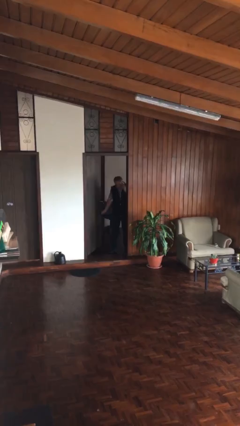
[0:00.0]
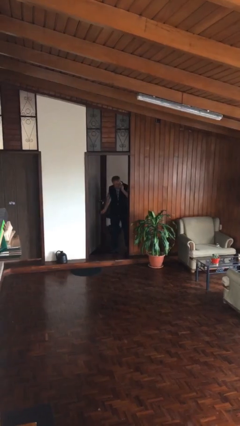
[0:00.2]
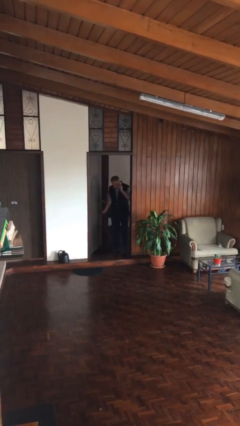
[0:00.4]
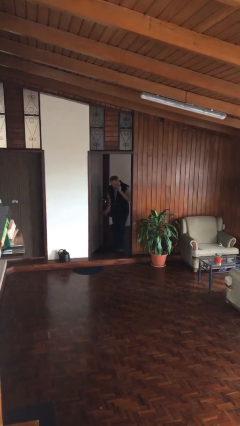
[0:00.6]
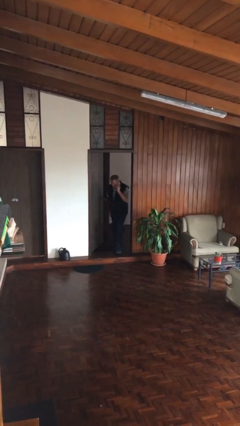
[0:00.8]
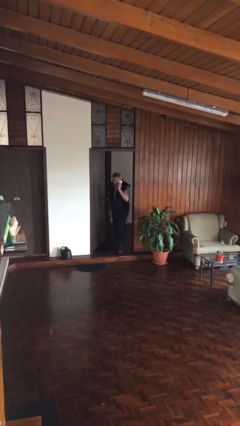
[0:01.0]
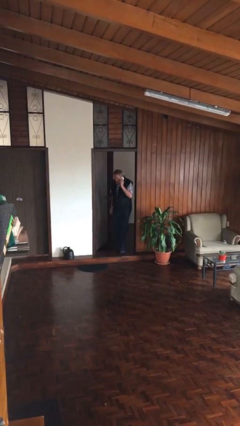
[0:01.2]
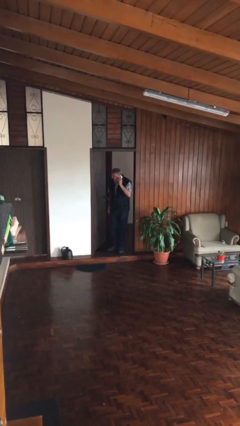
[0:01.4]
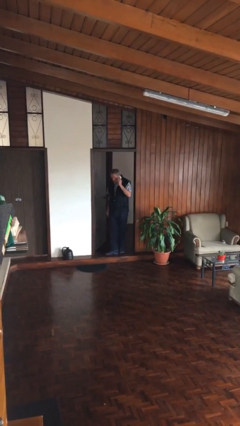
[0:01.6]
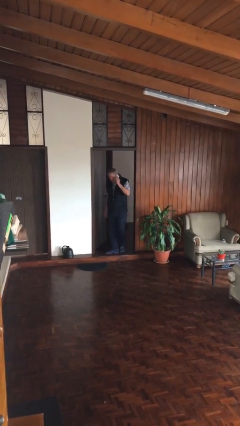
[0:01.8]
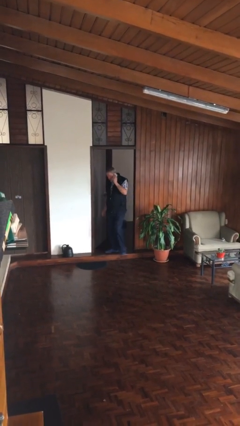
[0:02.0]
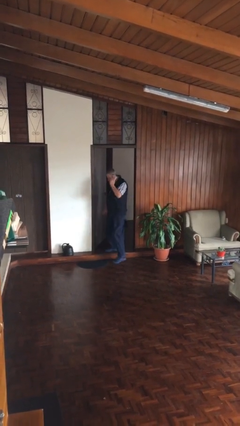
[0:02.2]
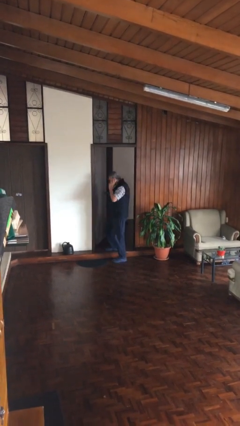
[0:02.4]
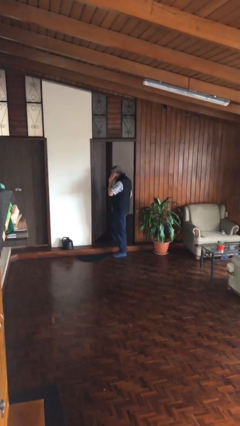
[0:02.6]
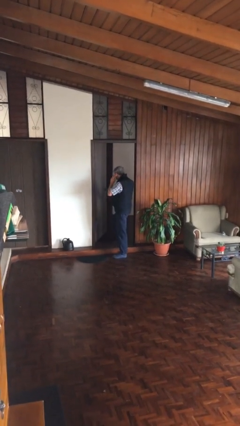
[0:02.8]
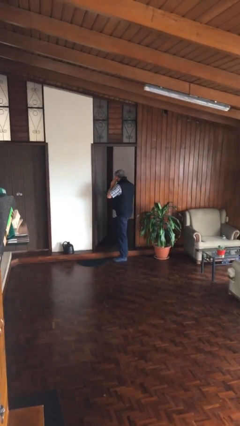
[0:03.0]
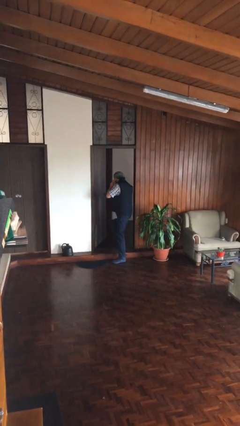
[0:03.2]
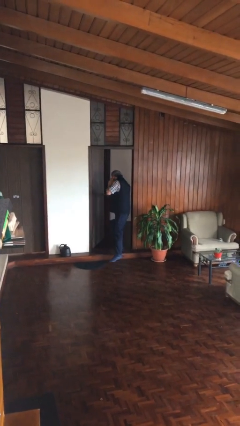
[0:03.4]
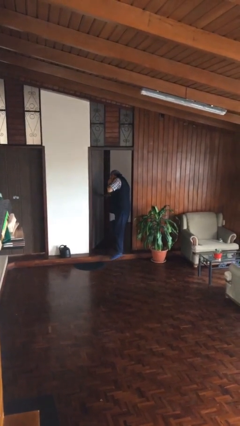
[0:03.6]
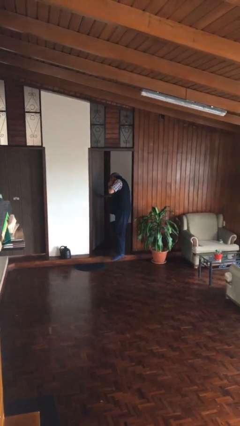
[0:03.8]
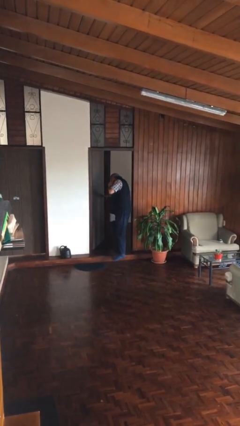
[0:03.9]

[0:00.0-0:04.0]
person enters scene through structure

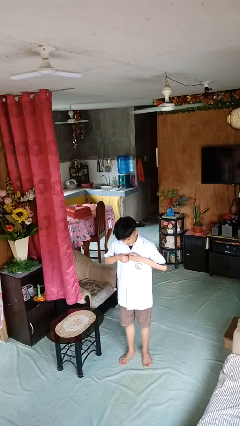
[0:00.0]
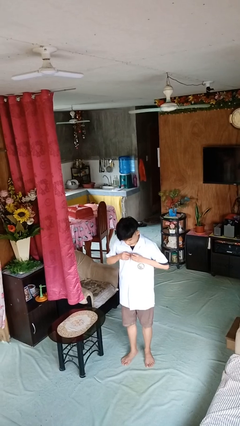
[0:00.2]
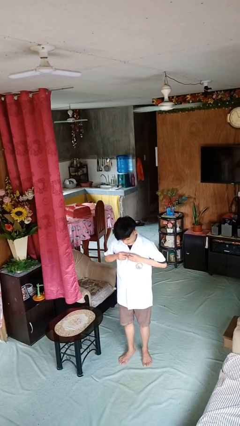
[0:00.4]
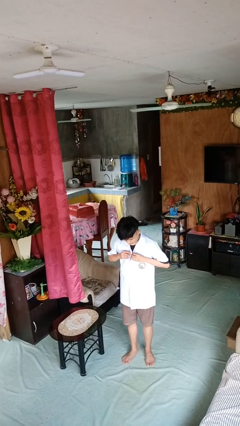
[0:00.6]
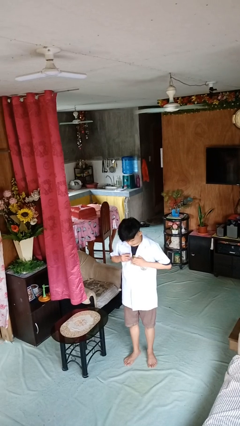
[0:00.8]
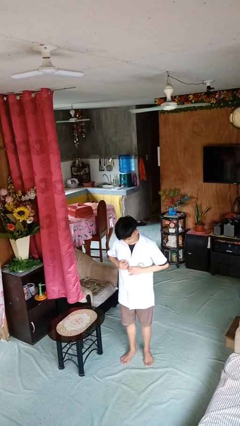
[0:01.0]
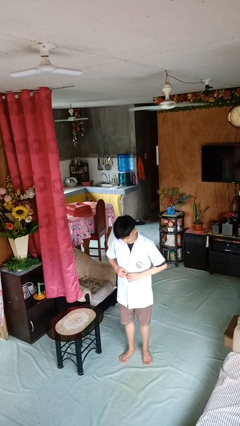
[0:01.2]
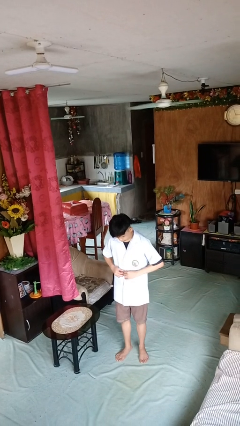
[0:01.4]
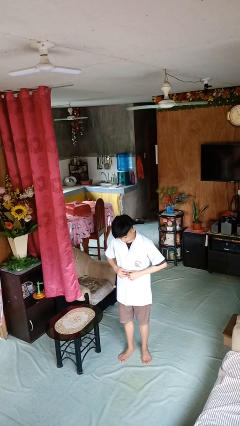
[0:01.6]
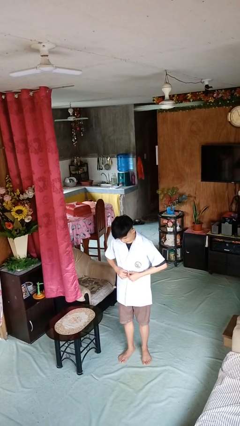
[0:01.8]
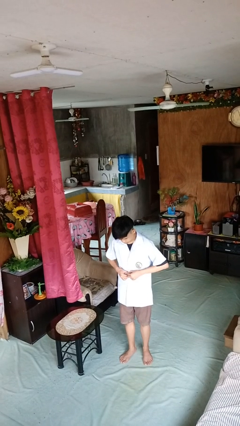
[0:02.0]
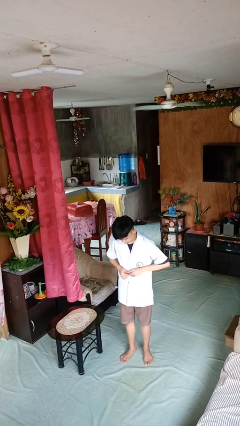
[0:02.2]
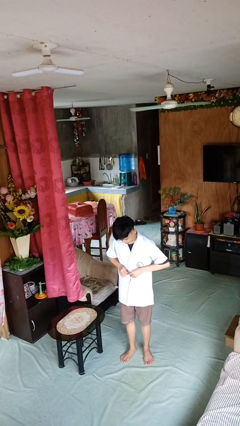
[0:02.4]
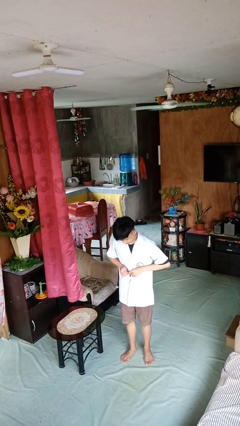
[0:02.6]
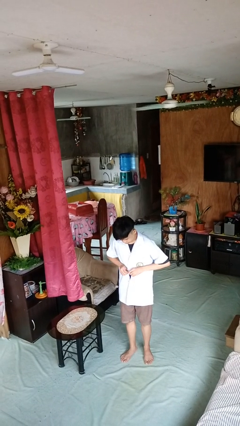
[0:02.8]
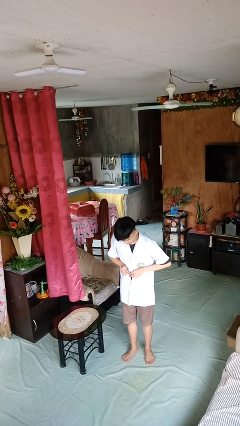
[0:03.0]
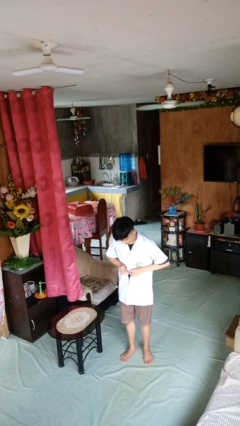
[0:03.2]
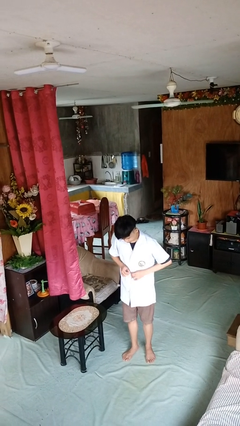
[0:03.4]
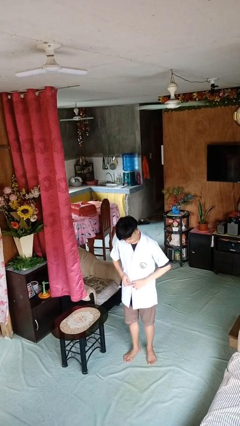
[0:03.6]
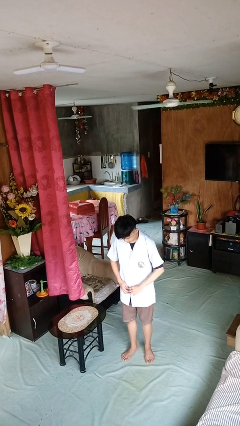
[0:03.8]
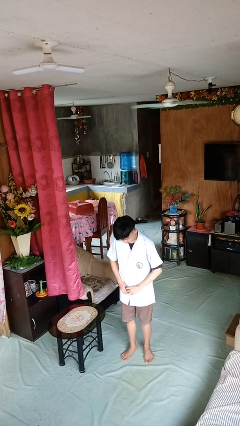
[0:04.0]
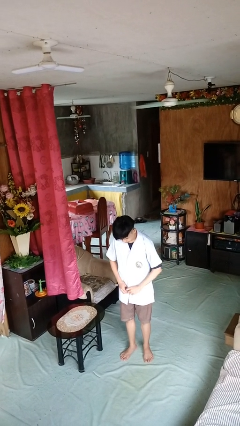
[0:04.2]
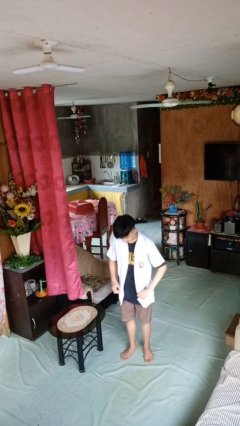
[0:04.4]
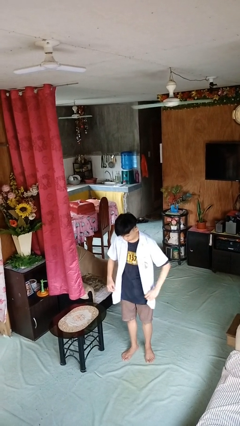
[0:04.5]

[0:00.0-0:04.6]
person unbuttons shirt

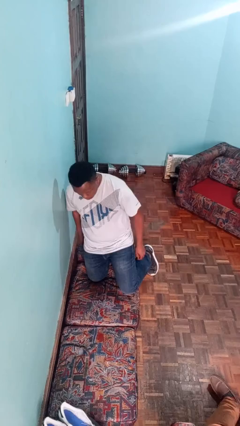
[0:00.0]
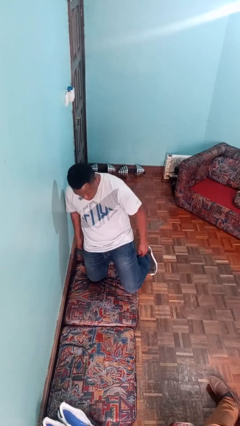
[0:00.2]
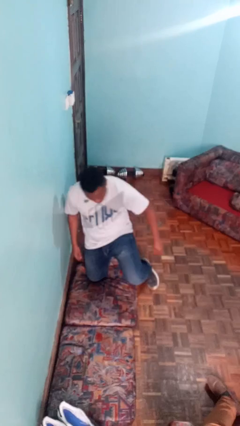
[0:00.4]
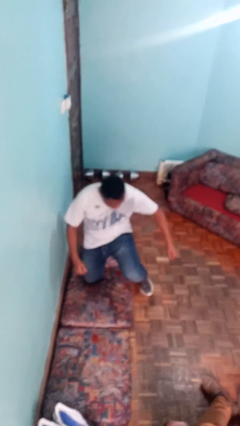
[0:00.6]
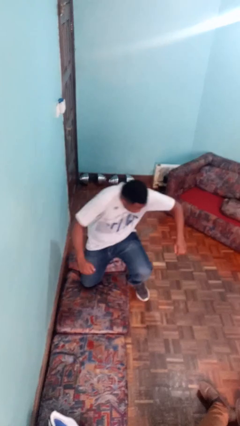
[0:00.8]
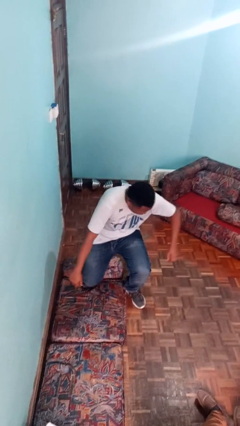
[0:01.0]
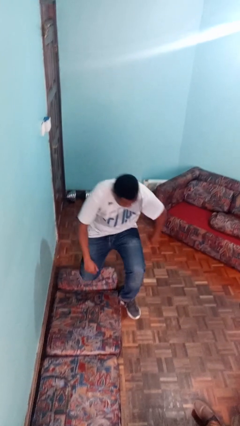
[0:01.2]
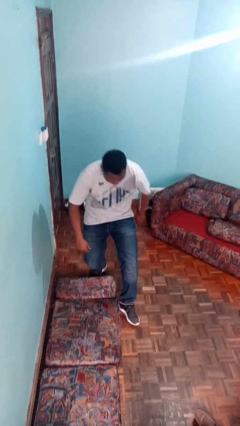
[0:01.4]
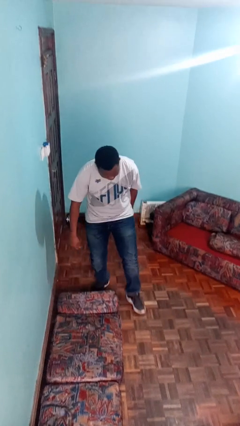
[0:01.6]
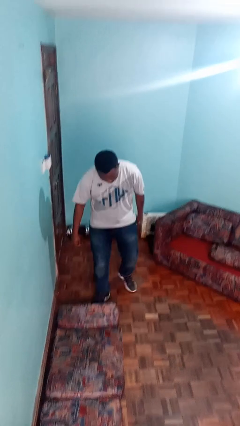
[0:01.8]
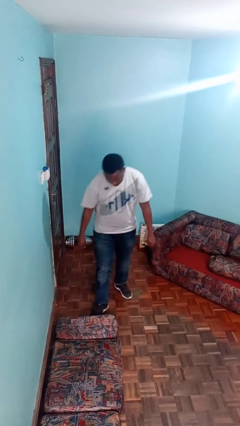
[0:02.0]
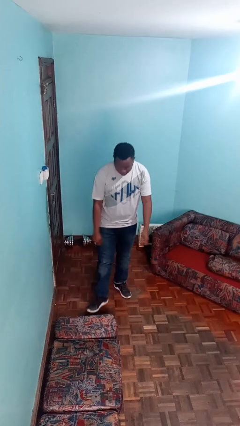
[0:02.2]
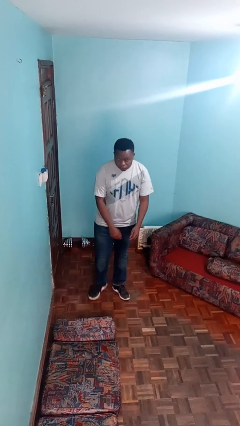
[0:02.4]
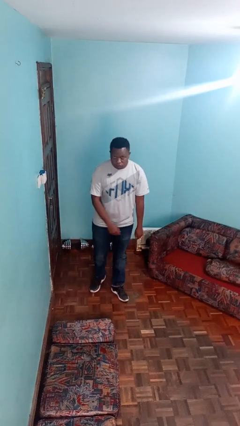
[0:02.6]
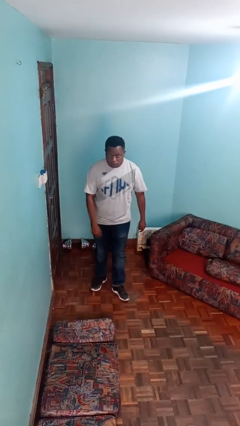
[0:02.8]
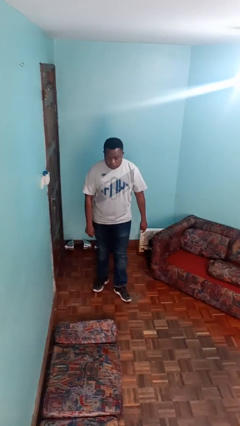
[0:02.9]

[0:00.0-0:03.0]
person stands up from floor

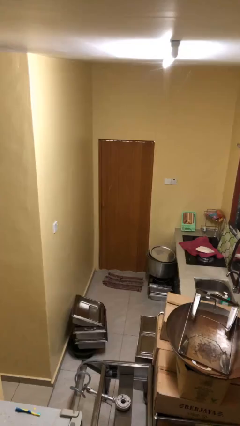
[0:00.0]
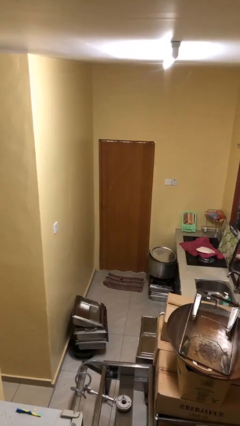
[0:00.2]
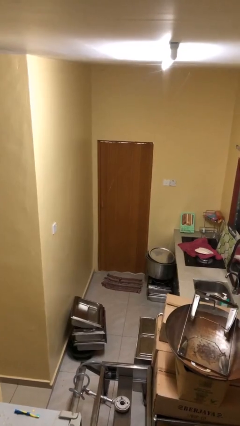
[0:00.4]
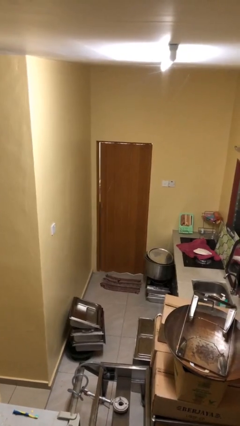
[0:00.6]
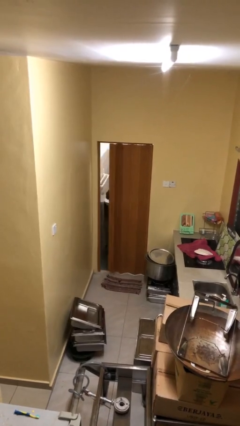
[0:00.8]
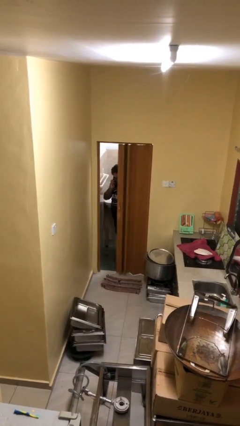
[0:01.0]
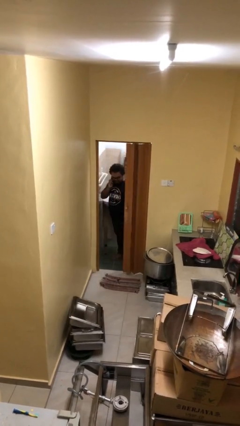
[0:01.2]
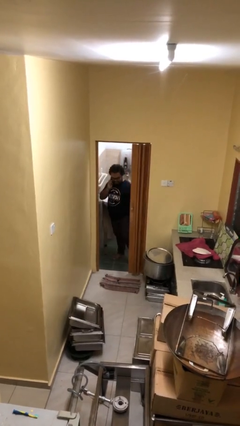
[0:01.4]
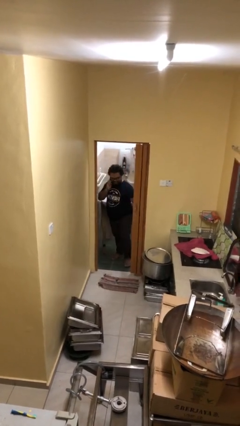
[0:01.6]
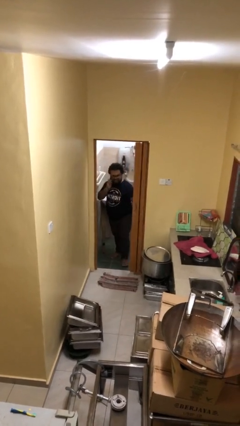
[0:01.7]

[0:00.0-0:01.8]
person opens facility door

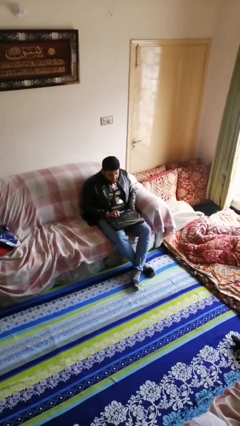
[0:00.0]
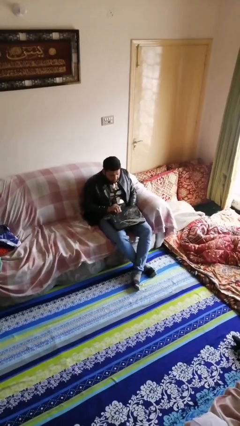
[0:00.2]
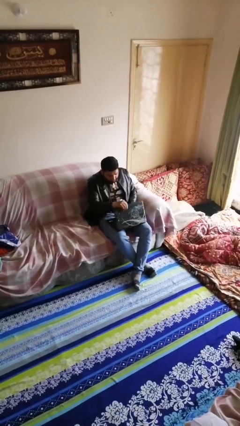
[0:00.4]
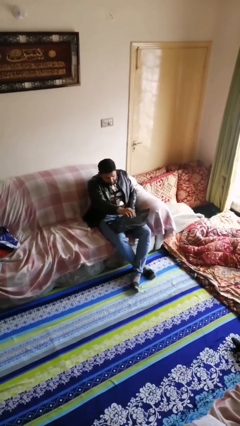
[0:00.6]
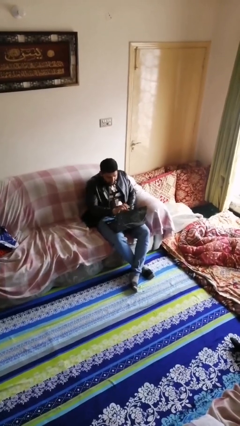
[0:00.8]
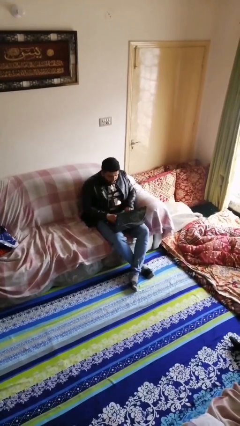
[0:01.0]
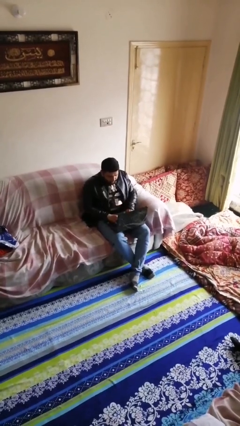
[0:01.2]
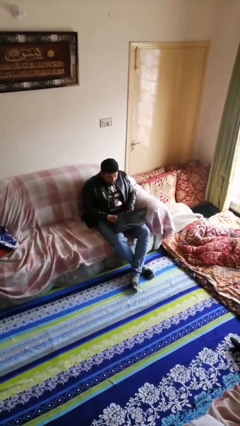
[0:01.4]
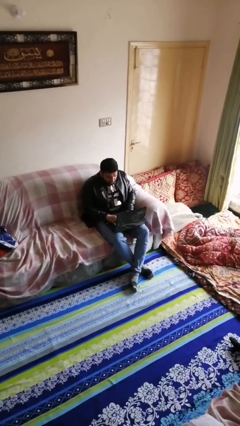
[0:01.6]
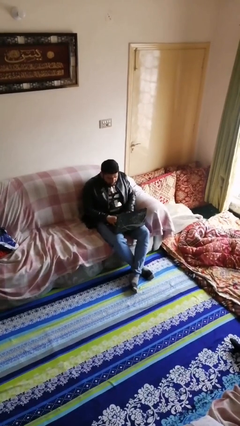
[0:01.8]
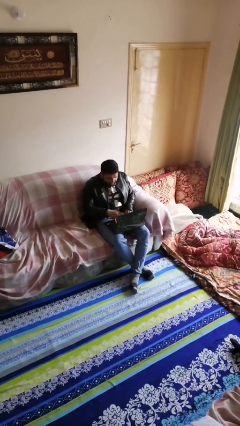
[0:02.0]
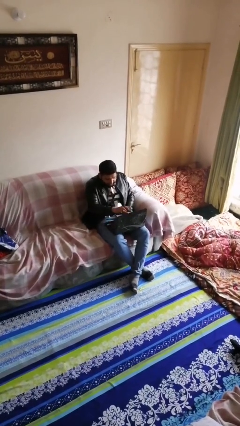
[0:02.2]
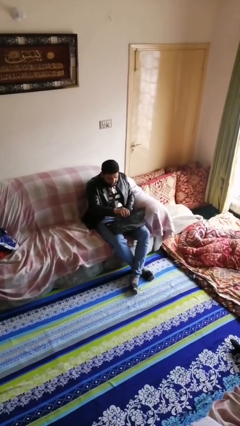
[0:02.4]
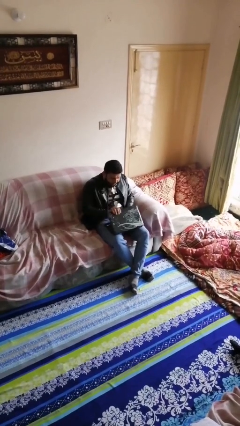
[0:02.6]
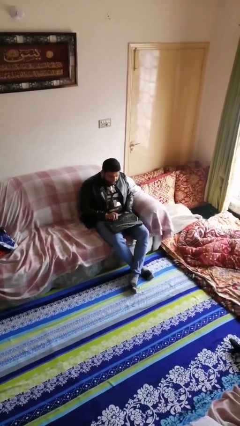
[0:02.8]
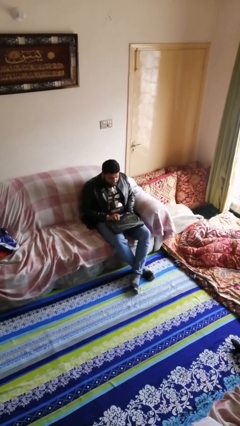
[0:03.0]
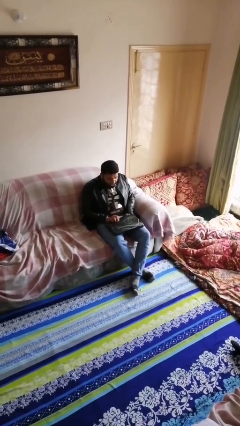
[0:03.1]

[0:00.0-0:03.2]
person interacts with laptop

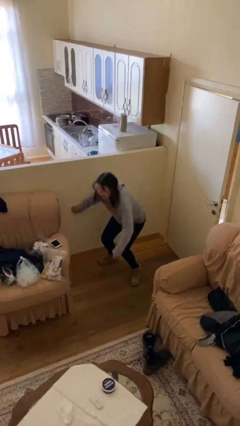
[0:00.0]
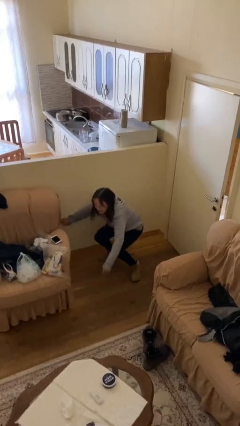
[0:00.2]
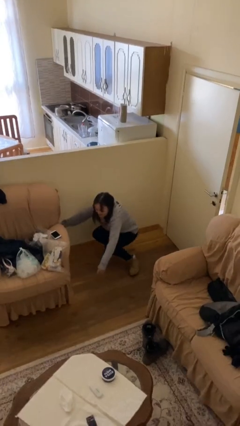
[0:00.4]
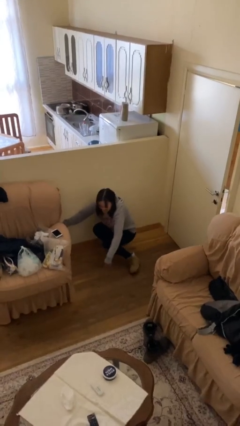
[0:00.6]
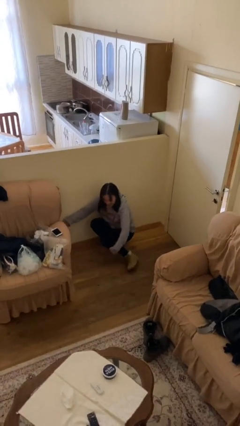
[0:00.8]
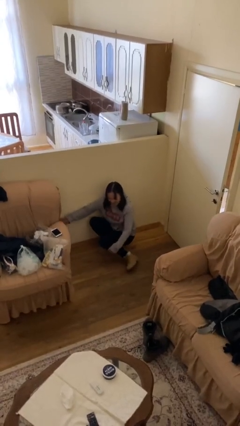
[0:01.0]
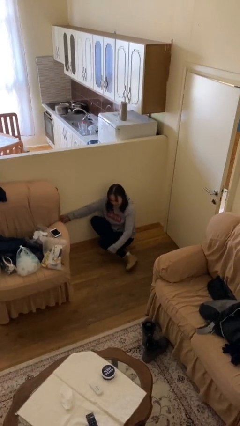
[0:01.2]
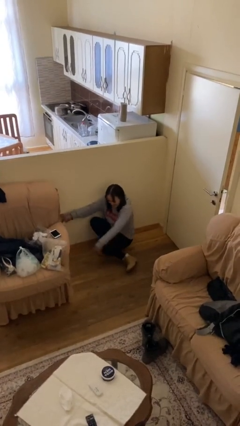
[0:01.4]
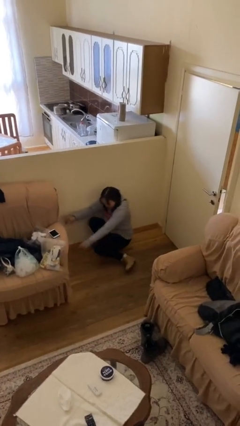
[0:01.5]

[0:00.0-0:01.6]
person sits down
